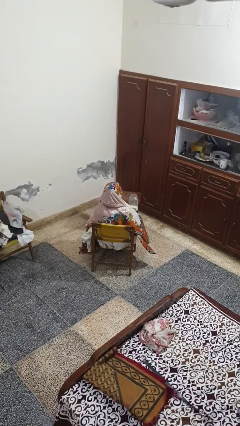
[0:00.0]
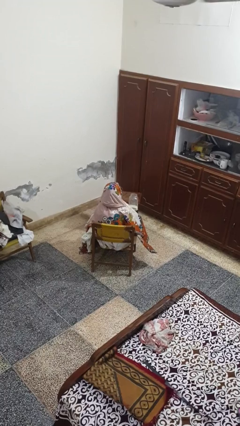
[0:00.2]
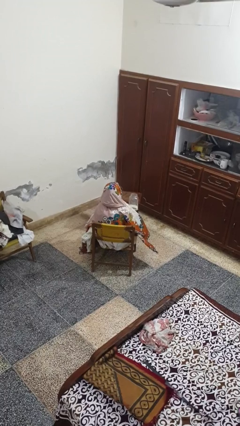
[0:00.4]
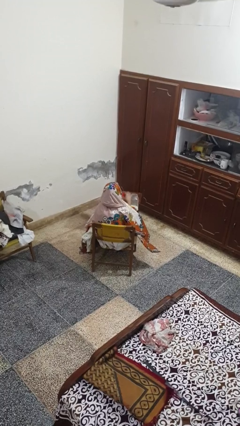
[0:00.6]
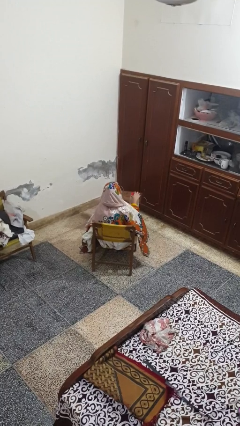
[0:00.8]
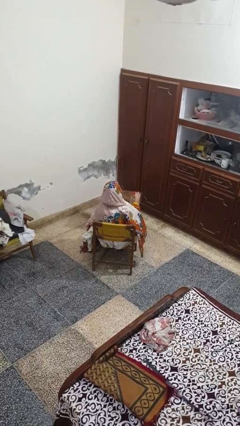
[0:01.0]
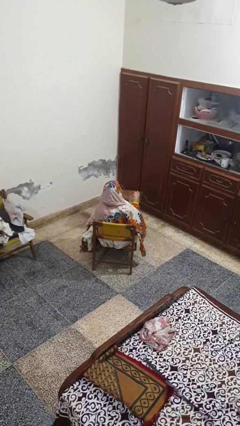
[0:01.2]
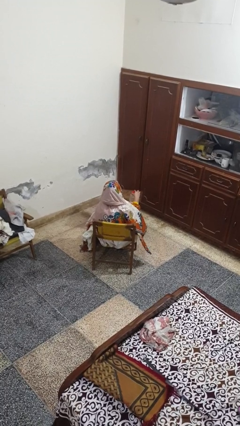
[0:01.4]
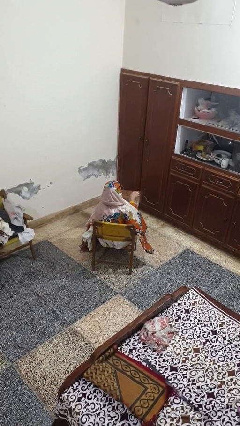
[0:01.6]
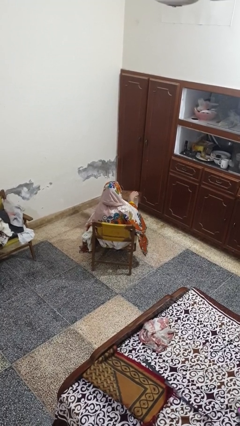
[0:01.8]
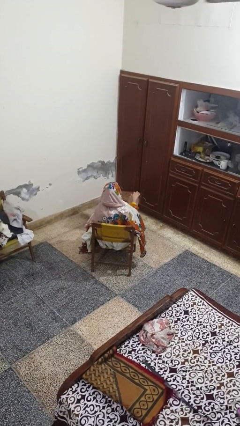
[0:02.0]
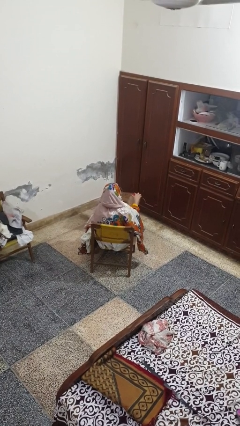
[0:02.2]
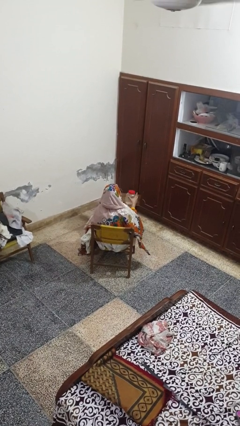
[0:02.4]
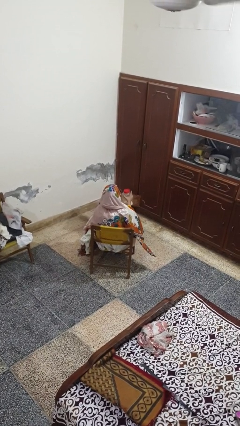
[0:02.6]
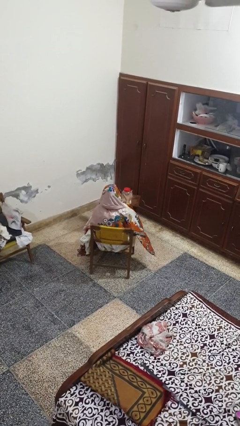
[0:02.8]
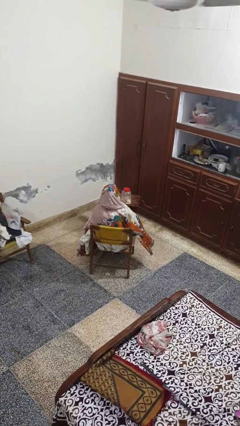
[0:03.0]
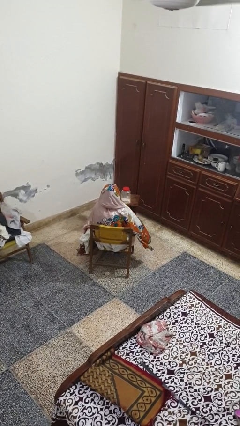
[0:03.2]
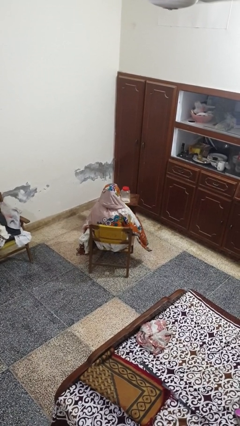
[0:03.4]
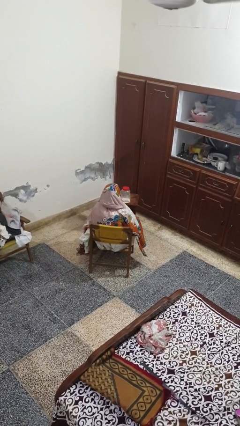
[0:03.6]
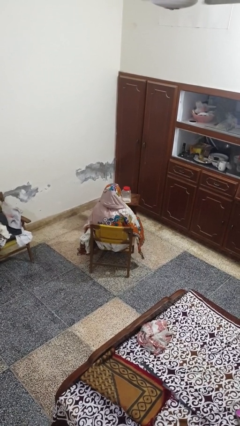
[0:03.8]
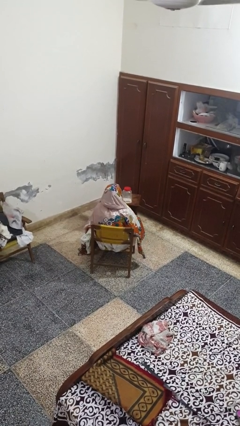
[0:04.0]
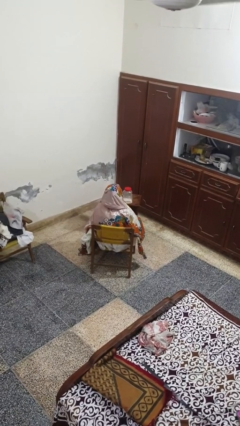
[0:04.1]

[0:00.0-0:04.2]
person closes jar

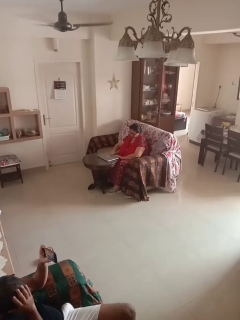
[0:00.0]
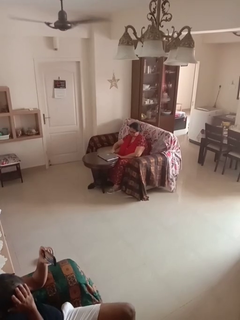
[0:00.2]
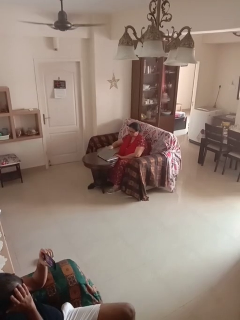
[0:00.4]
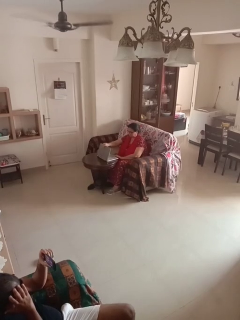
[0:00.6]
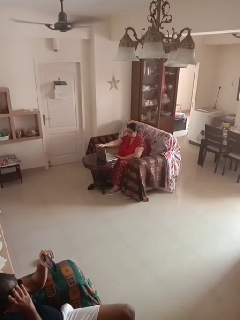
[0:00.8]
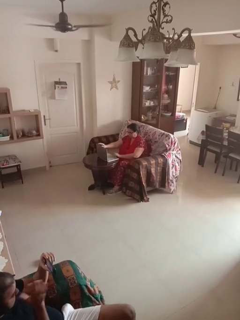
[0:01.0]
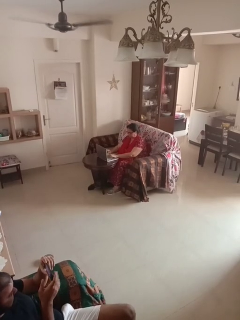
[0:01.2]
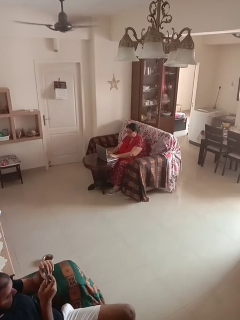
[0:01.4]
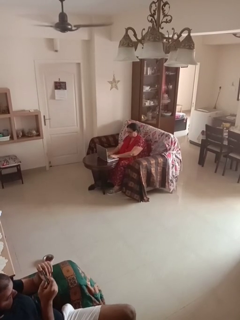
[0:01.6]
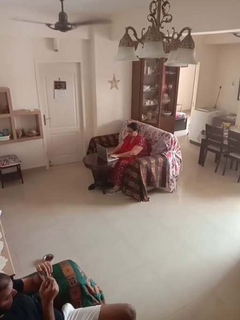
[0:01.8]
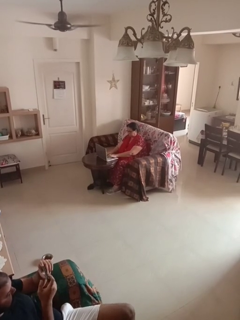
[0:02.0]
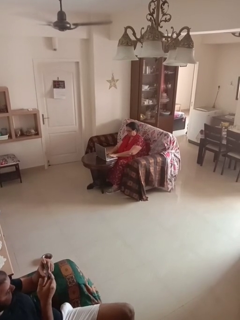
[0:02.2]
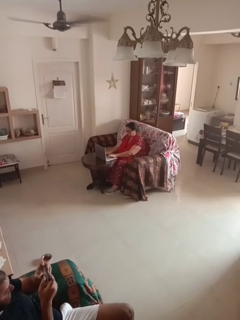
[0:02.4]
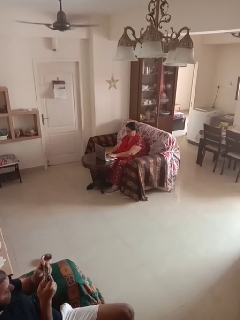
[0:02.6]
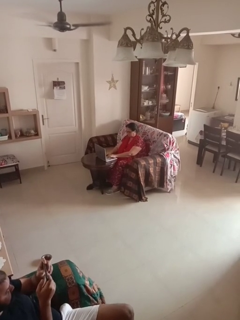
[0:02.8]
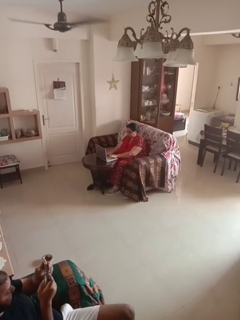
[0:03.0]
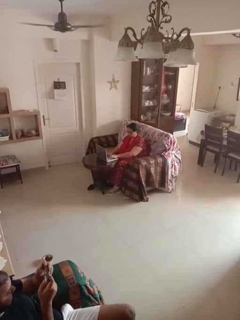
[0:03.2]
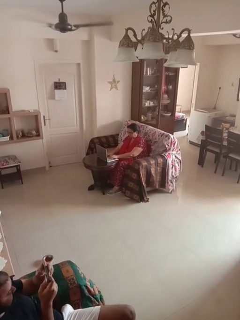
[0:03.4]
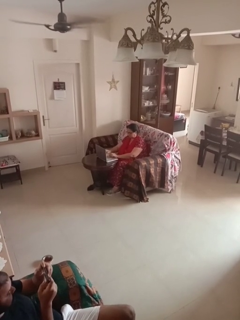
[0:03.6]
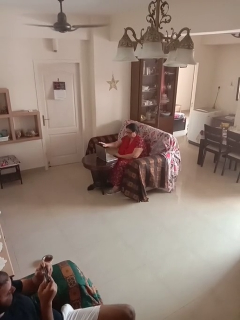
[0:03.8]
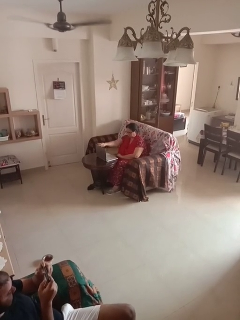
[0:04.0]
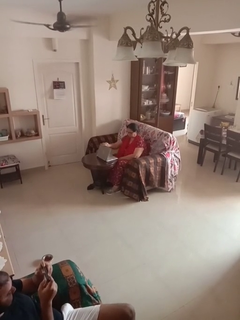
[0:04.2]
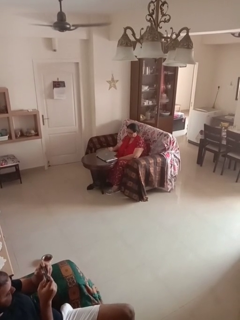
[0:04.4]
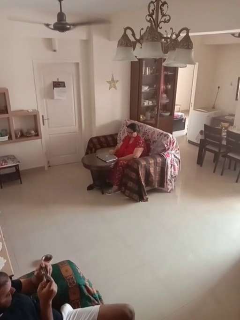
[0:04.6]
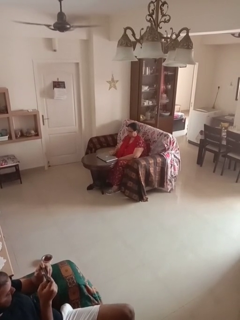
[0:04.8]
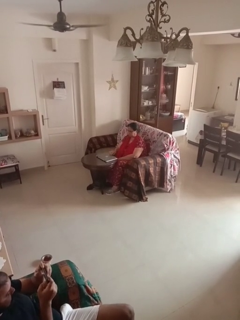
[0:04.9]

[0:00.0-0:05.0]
person interacts with laptop

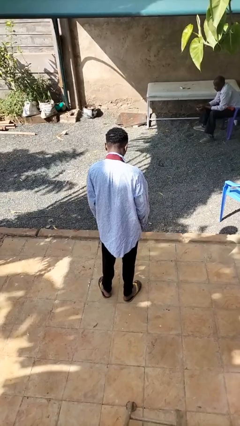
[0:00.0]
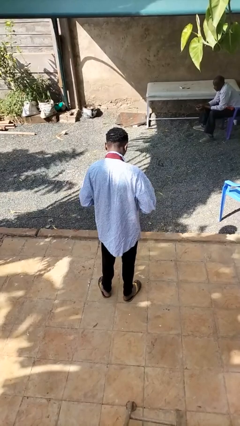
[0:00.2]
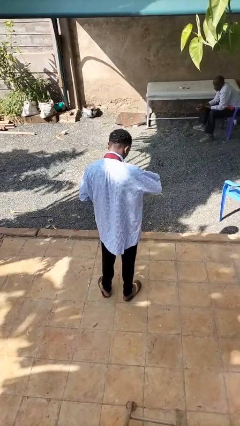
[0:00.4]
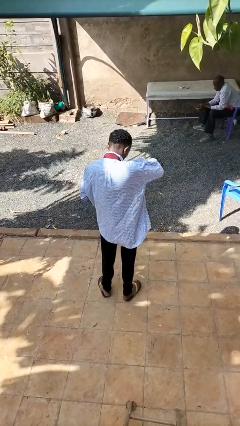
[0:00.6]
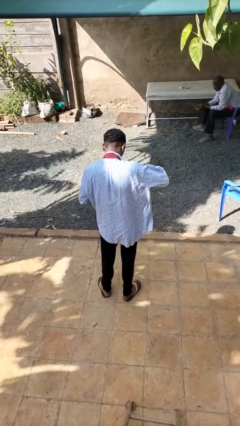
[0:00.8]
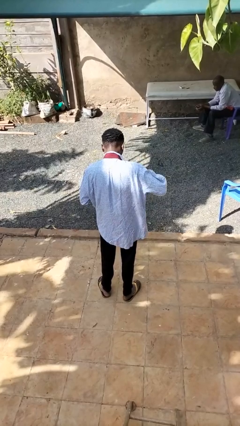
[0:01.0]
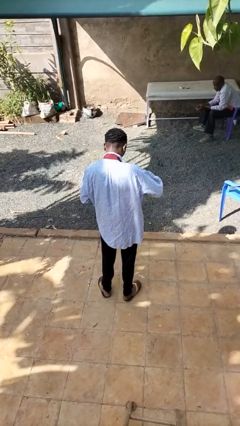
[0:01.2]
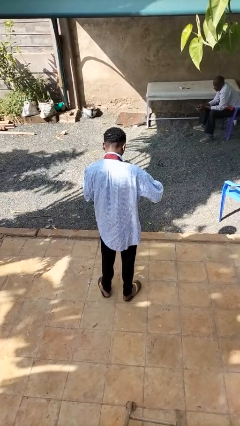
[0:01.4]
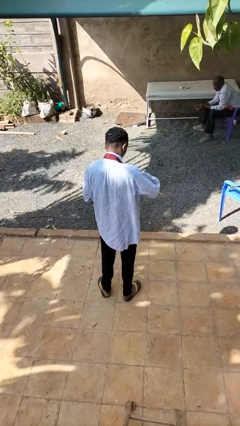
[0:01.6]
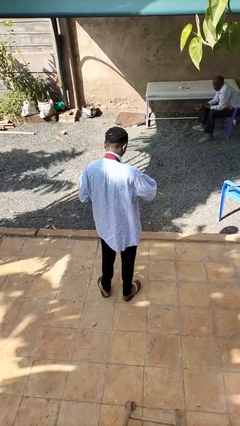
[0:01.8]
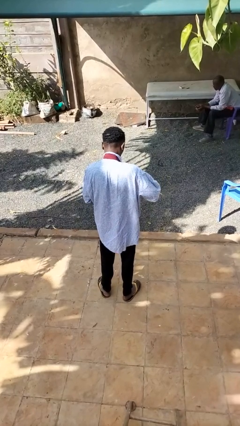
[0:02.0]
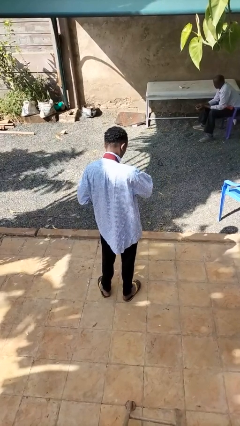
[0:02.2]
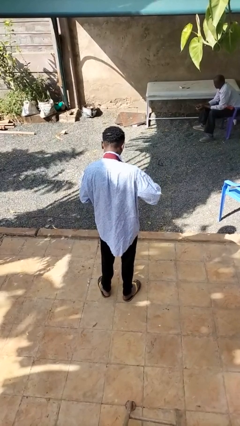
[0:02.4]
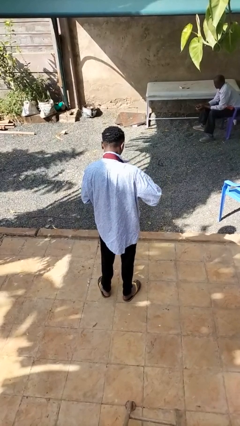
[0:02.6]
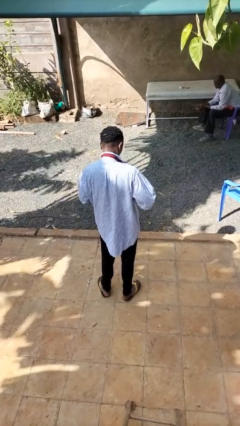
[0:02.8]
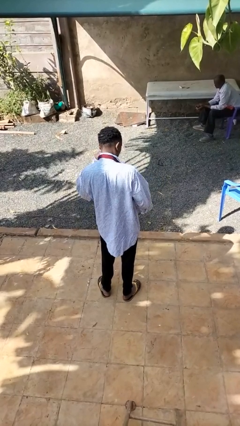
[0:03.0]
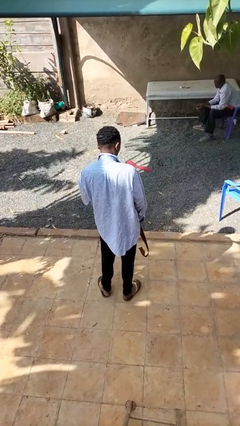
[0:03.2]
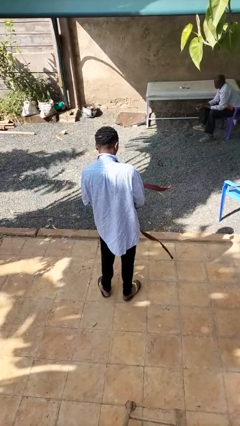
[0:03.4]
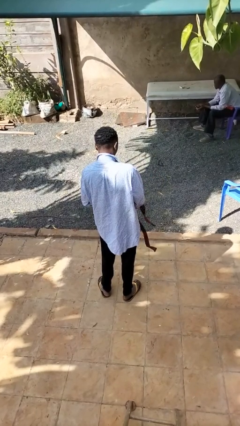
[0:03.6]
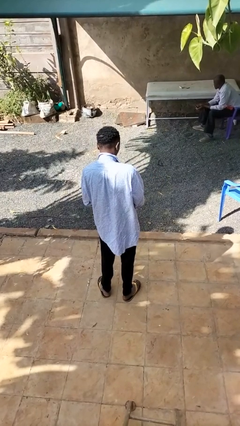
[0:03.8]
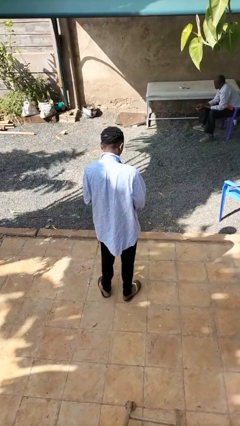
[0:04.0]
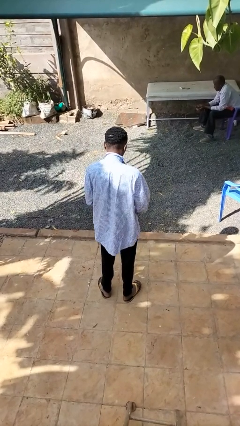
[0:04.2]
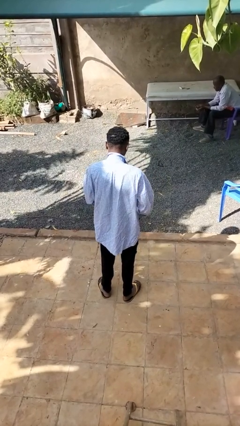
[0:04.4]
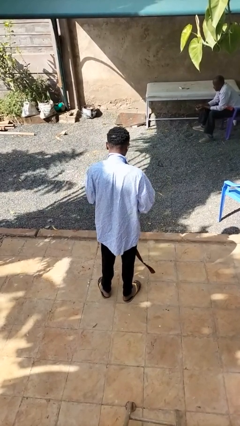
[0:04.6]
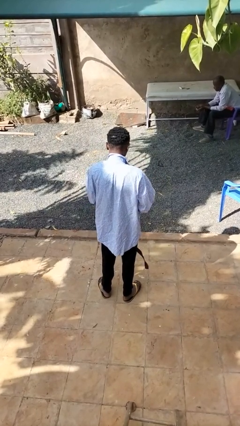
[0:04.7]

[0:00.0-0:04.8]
person takes off necktie

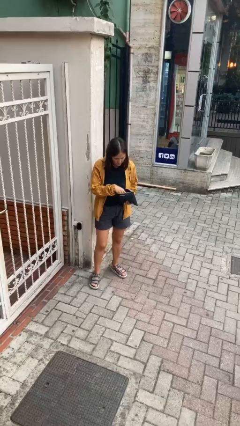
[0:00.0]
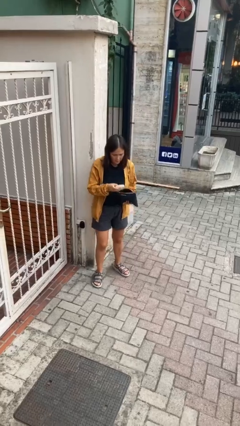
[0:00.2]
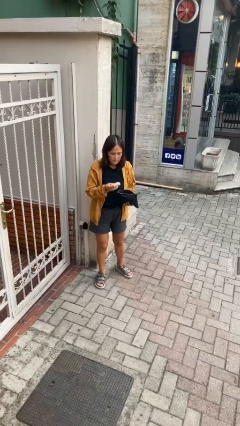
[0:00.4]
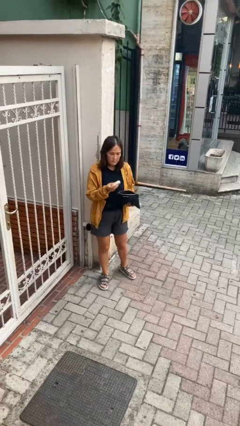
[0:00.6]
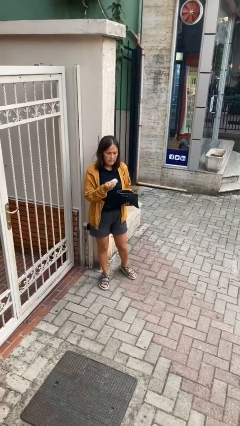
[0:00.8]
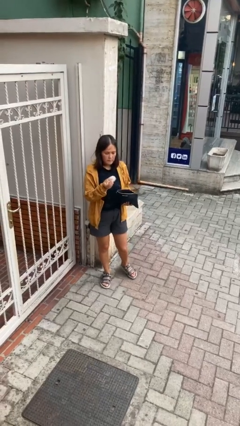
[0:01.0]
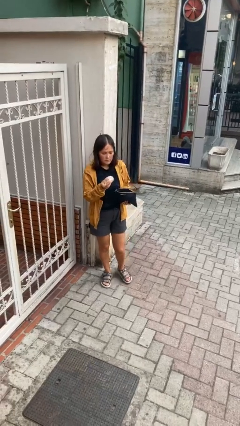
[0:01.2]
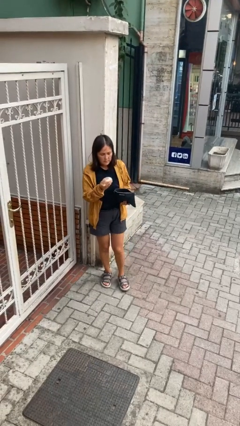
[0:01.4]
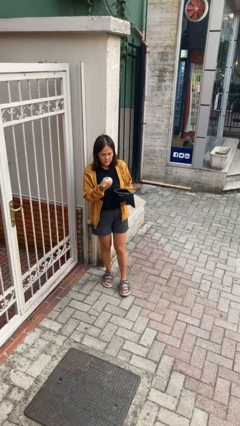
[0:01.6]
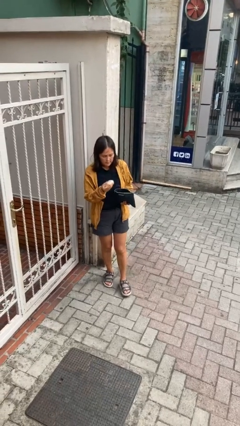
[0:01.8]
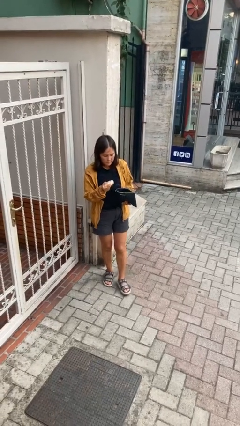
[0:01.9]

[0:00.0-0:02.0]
person takes object from purse

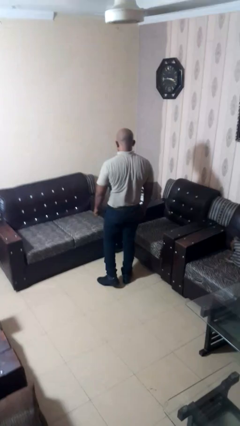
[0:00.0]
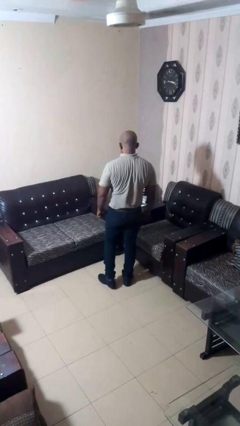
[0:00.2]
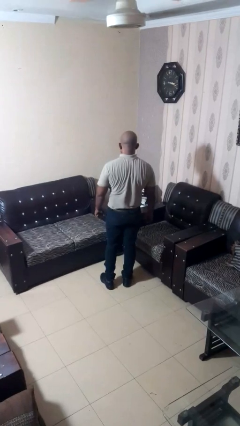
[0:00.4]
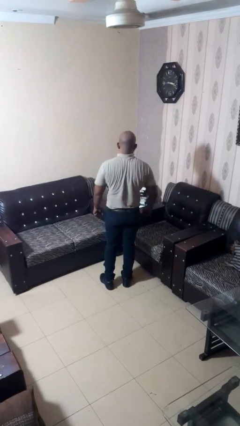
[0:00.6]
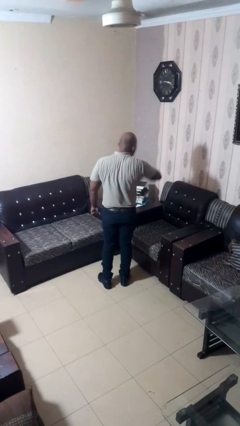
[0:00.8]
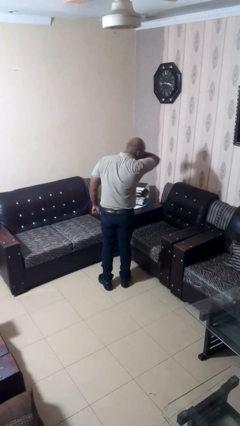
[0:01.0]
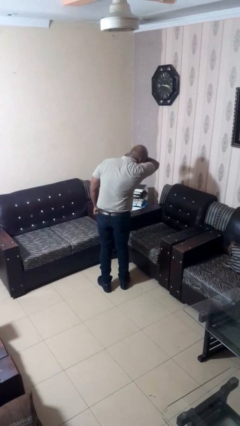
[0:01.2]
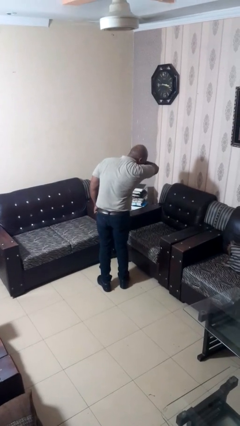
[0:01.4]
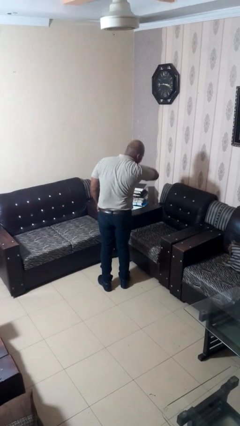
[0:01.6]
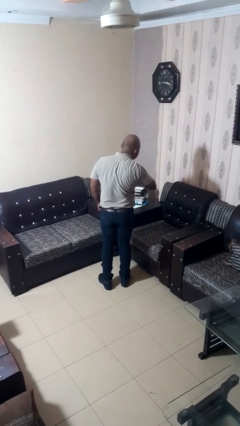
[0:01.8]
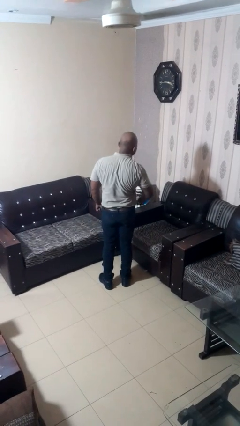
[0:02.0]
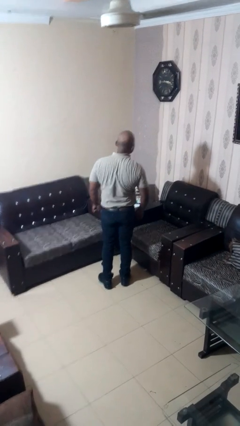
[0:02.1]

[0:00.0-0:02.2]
person sneezes into arm

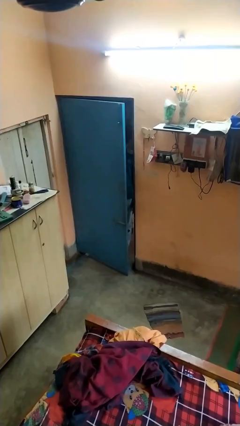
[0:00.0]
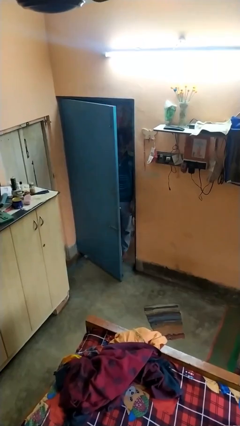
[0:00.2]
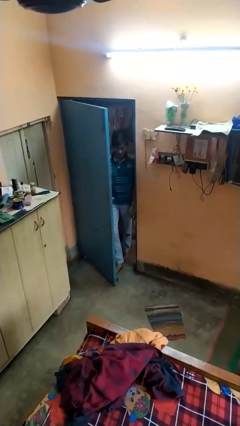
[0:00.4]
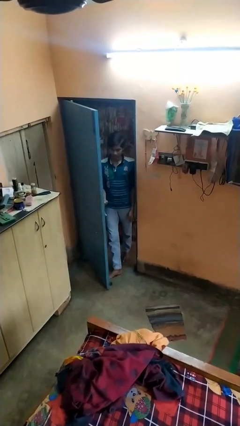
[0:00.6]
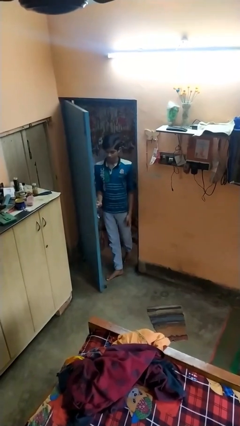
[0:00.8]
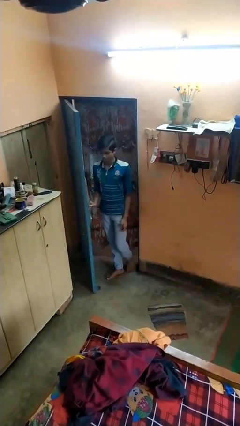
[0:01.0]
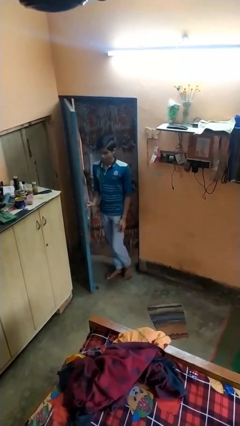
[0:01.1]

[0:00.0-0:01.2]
person opens facility door
